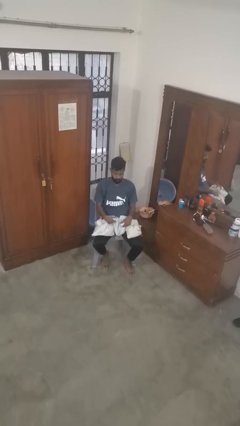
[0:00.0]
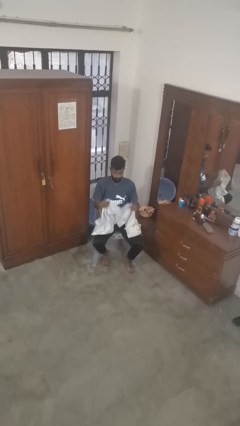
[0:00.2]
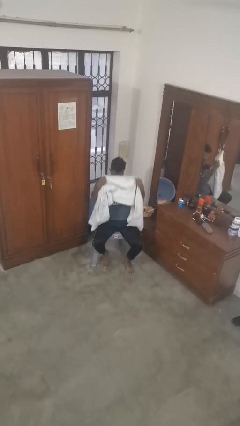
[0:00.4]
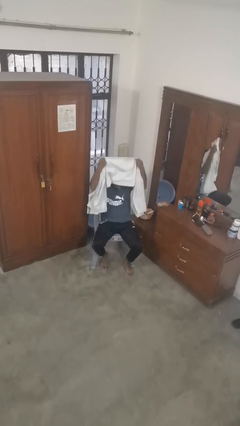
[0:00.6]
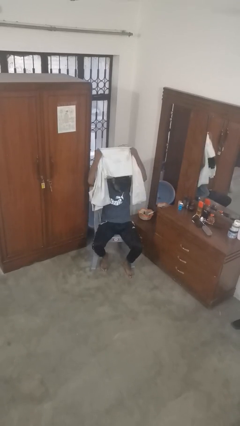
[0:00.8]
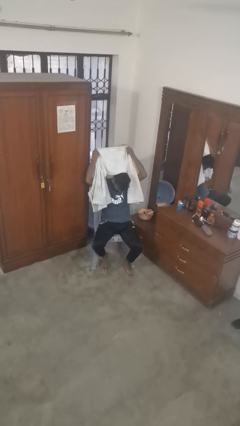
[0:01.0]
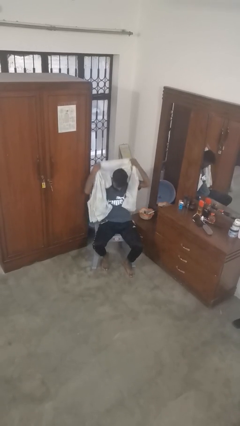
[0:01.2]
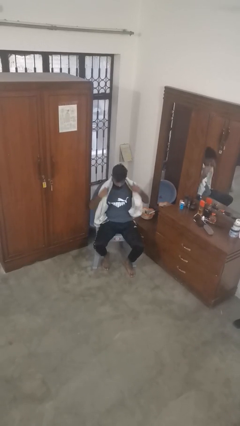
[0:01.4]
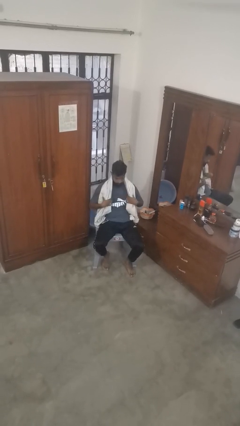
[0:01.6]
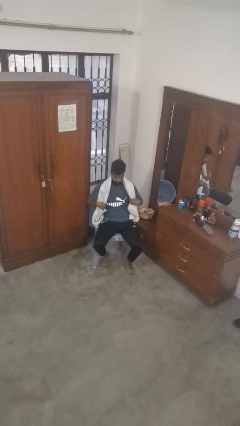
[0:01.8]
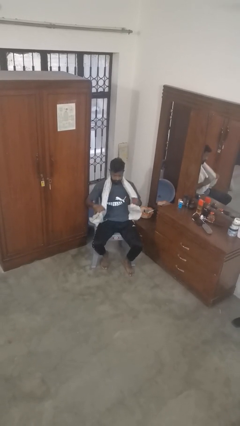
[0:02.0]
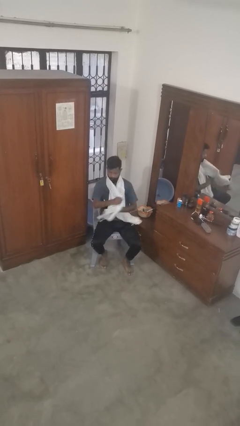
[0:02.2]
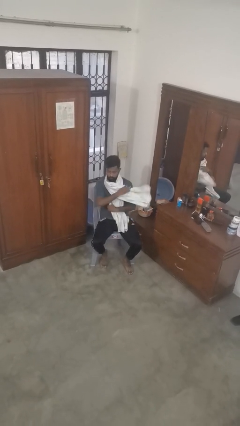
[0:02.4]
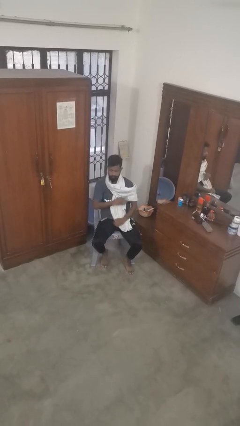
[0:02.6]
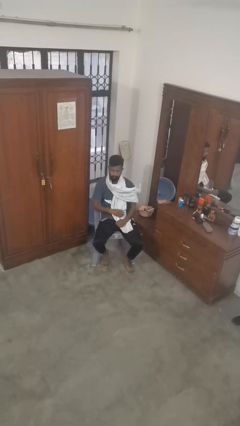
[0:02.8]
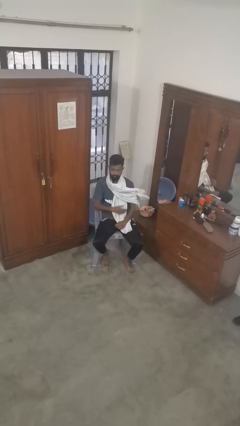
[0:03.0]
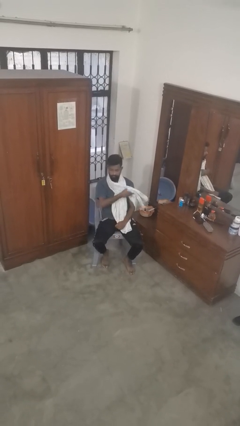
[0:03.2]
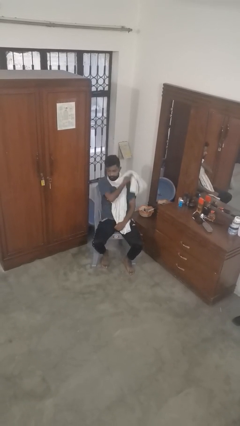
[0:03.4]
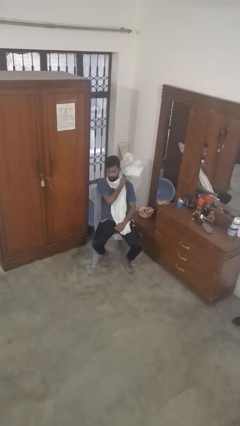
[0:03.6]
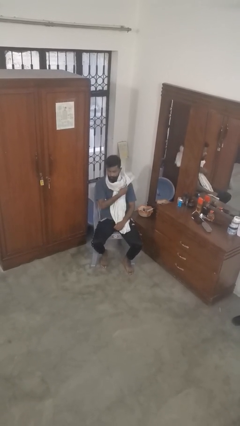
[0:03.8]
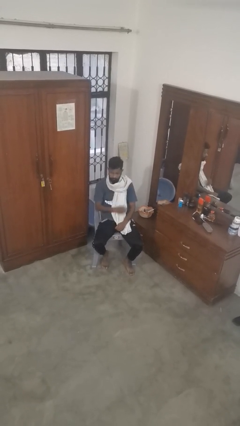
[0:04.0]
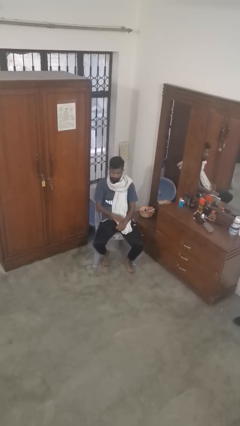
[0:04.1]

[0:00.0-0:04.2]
person puts on scarf

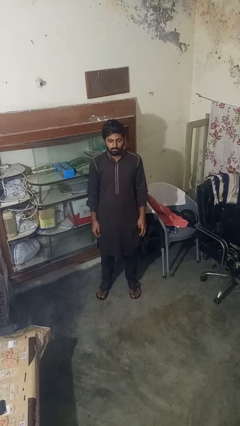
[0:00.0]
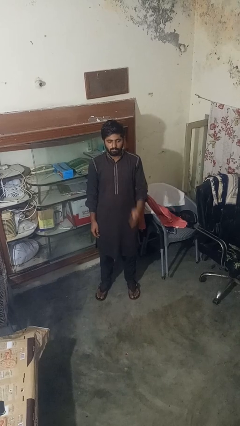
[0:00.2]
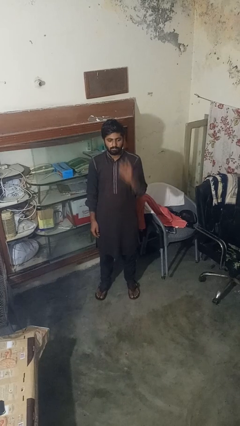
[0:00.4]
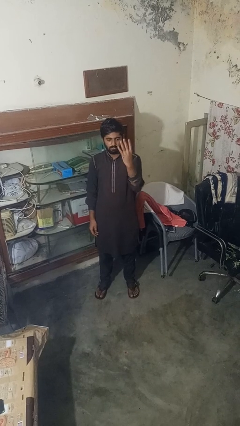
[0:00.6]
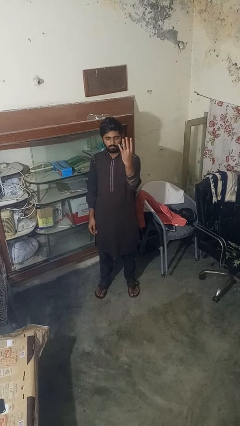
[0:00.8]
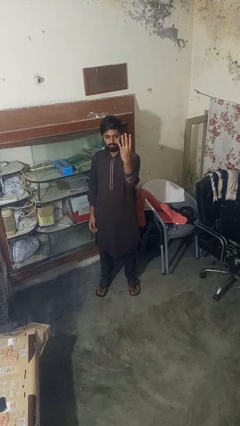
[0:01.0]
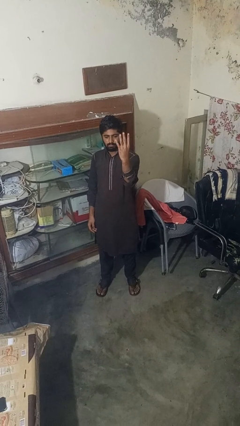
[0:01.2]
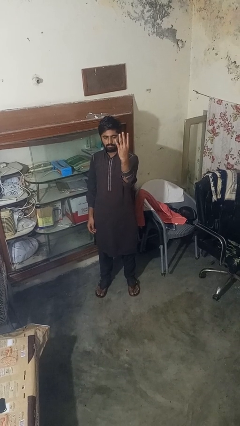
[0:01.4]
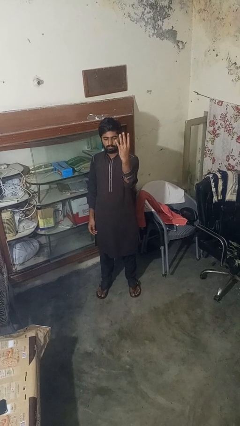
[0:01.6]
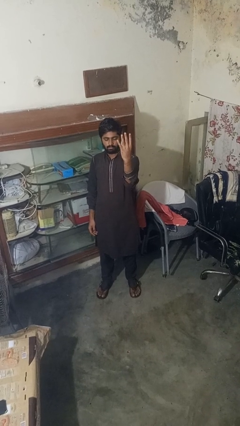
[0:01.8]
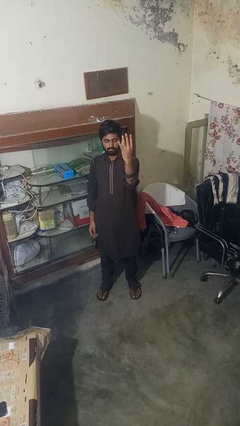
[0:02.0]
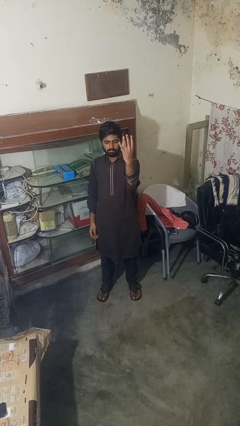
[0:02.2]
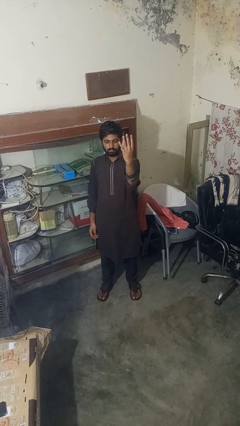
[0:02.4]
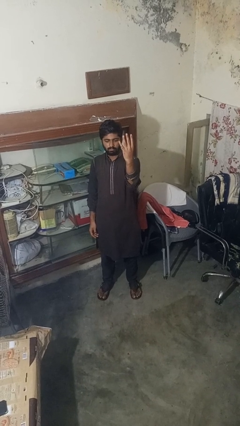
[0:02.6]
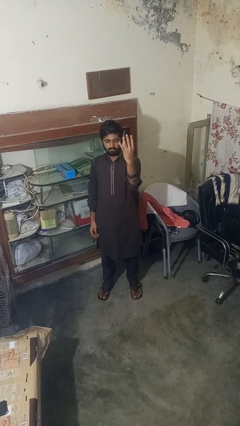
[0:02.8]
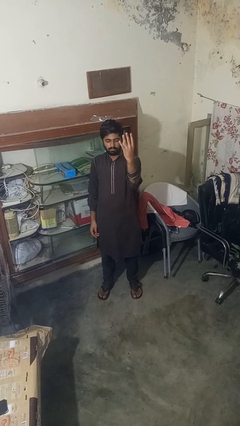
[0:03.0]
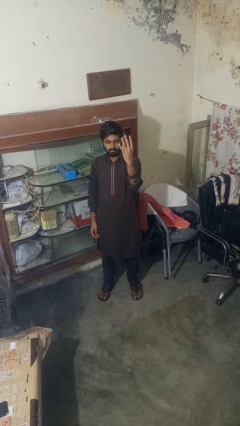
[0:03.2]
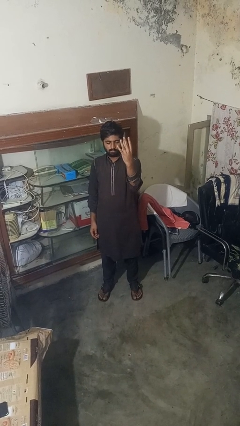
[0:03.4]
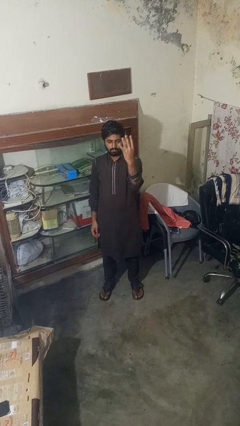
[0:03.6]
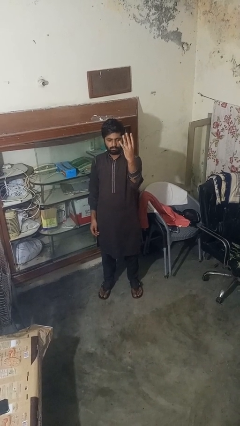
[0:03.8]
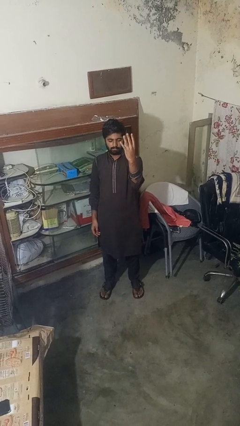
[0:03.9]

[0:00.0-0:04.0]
person gestures number four

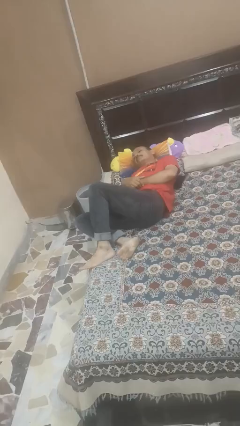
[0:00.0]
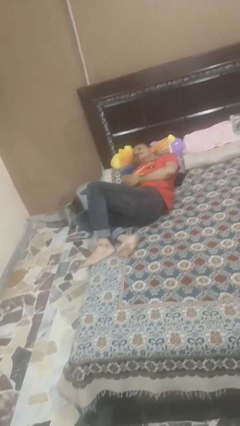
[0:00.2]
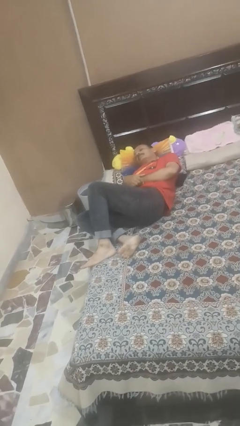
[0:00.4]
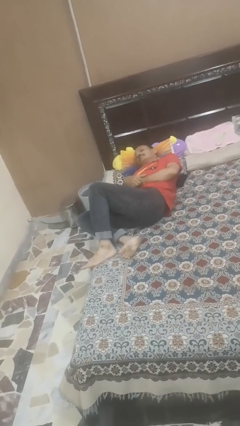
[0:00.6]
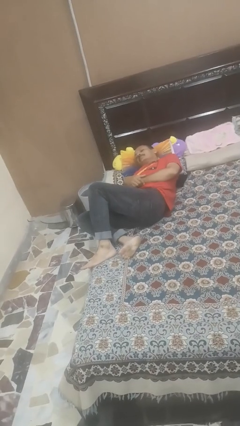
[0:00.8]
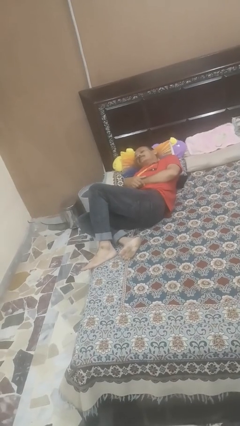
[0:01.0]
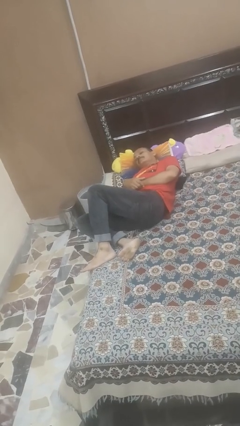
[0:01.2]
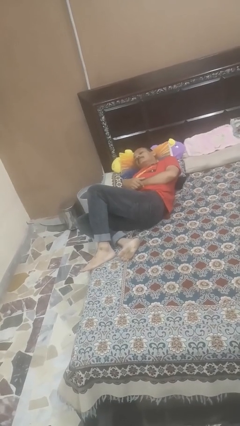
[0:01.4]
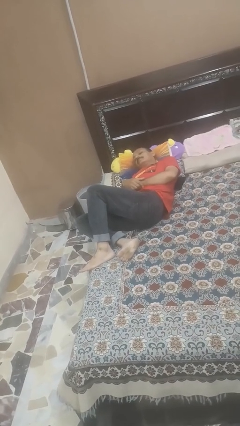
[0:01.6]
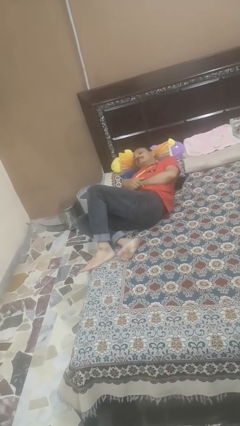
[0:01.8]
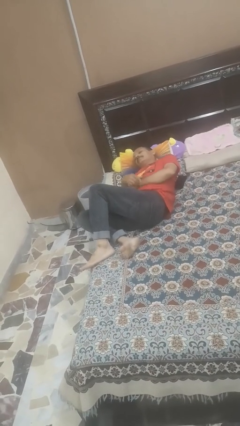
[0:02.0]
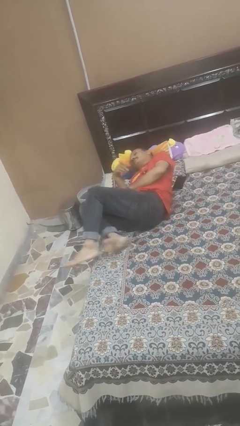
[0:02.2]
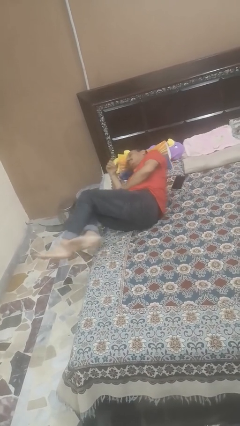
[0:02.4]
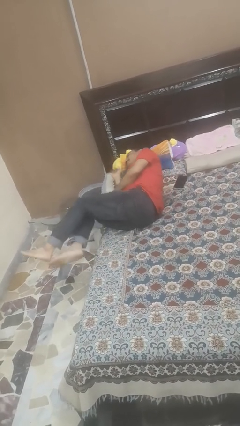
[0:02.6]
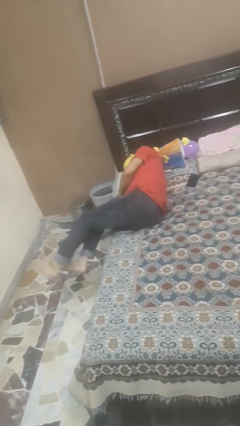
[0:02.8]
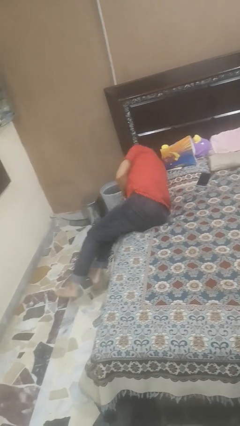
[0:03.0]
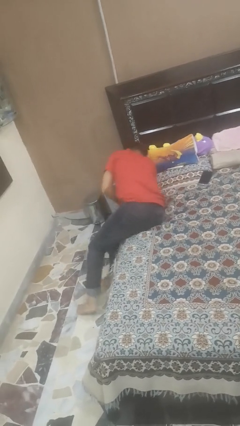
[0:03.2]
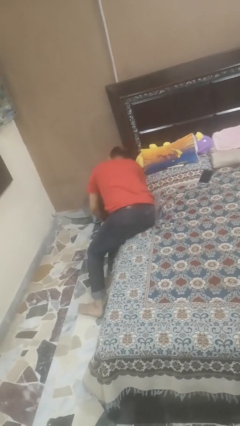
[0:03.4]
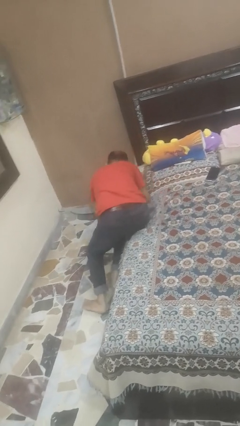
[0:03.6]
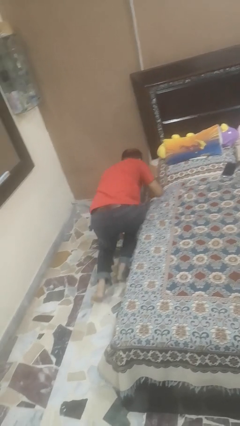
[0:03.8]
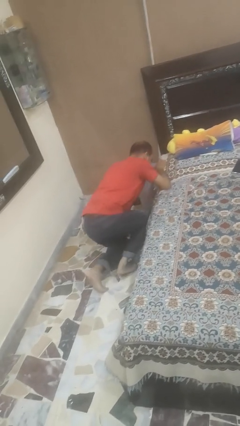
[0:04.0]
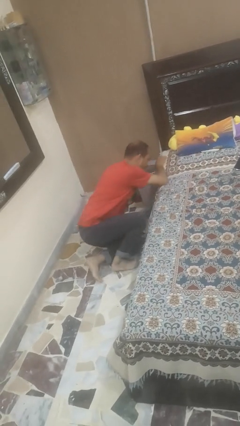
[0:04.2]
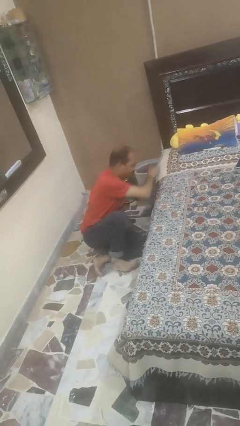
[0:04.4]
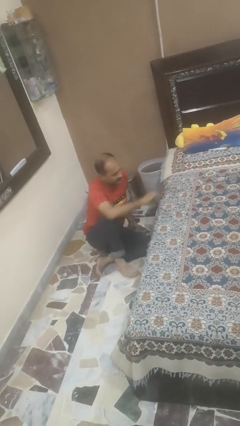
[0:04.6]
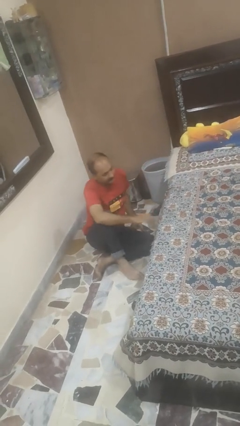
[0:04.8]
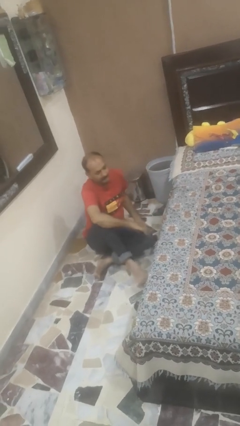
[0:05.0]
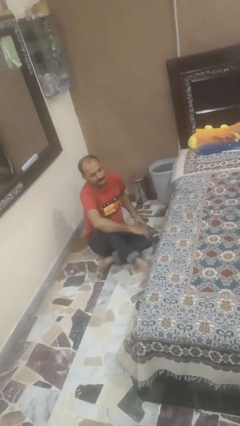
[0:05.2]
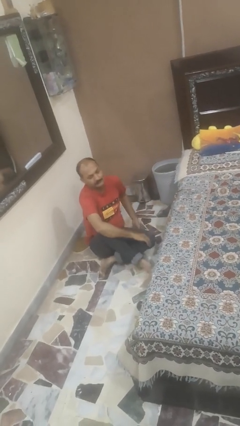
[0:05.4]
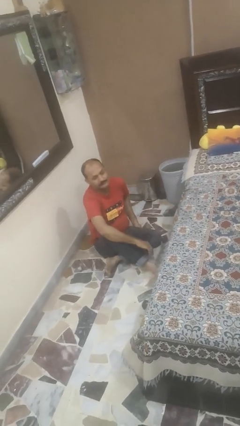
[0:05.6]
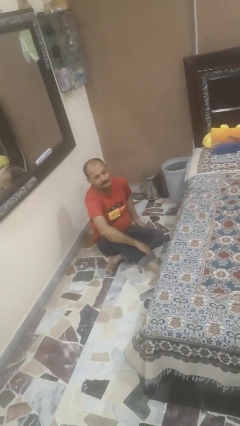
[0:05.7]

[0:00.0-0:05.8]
person falls from bed

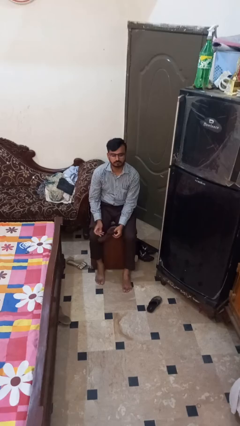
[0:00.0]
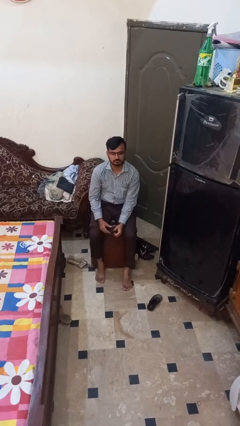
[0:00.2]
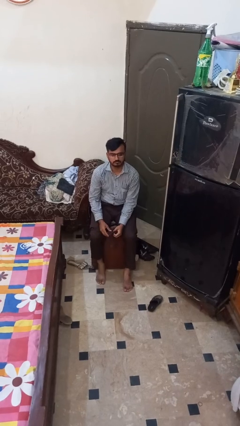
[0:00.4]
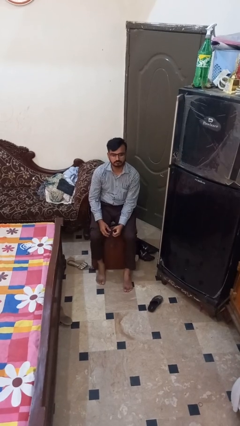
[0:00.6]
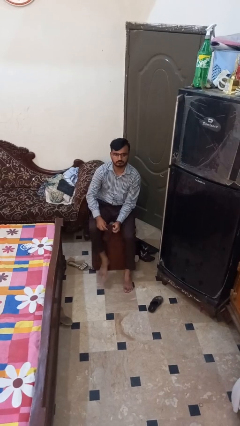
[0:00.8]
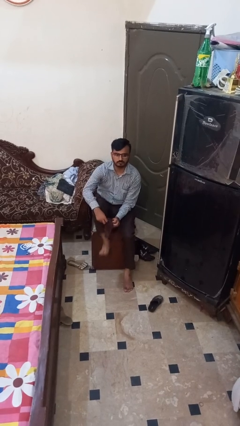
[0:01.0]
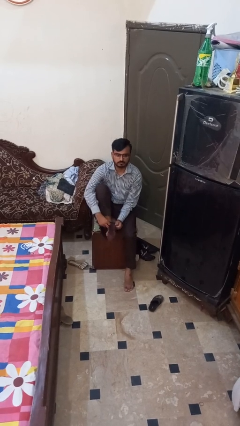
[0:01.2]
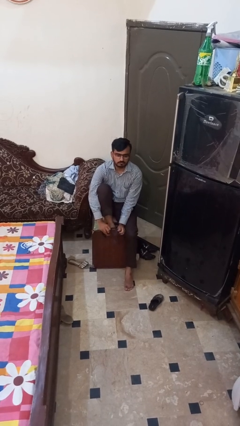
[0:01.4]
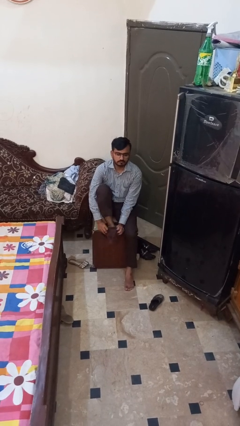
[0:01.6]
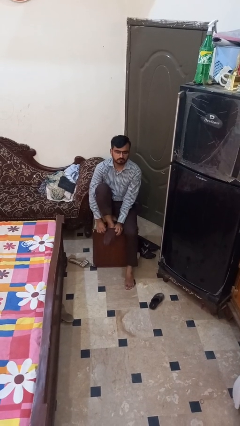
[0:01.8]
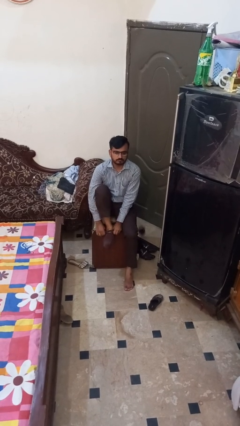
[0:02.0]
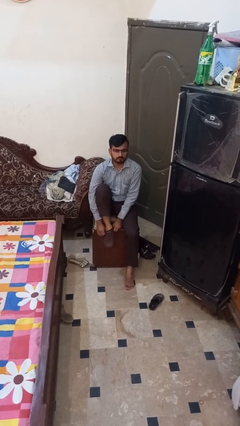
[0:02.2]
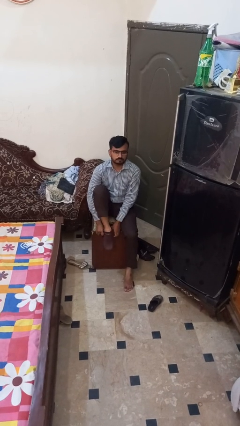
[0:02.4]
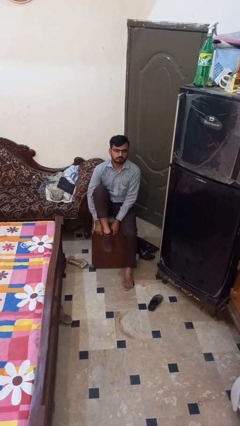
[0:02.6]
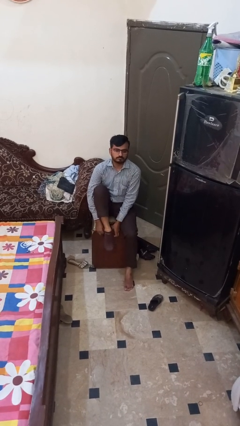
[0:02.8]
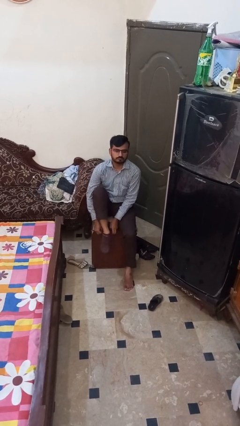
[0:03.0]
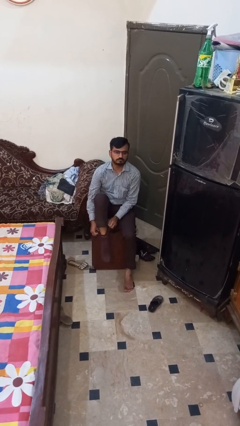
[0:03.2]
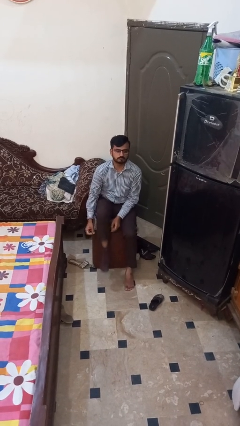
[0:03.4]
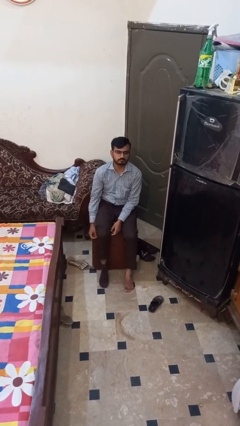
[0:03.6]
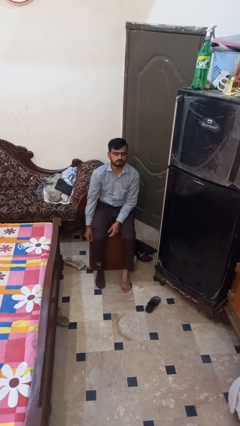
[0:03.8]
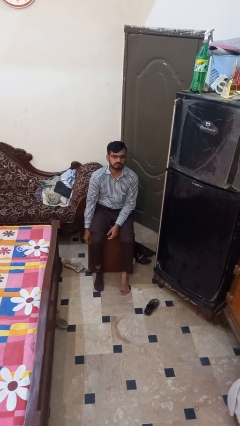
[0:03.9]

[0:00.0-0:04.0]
person puts on socks
